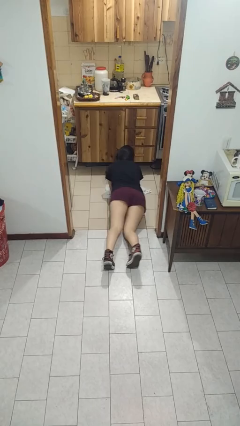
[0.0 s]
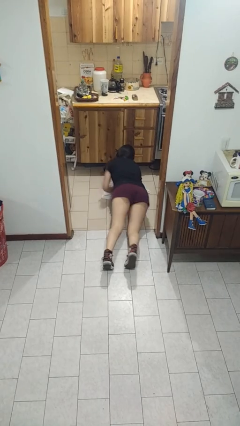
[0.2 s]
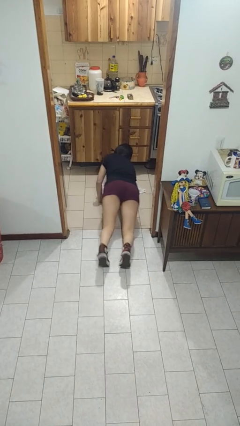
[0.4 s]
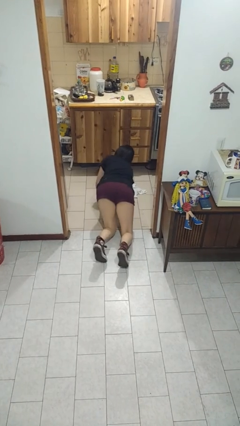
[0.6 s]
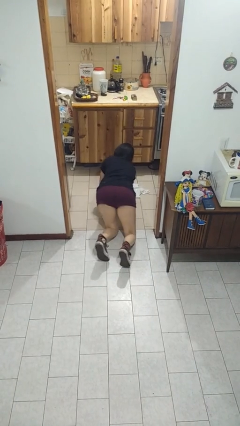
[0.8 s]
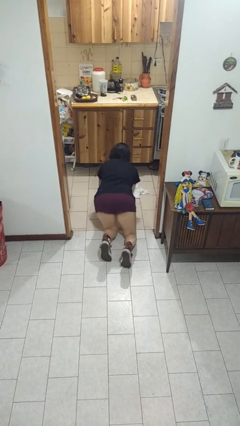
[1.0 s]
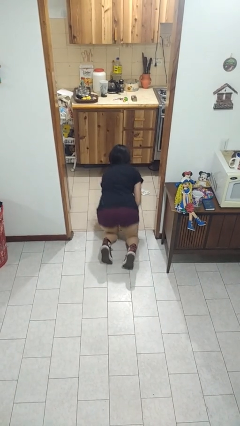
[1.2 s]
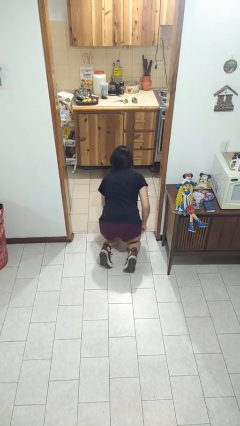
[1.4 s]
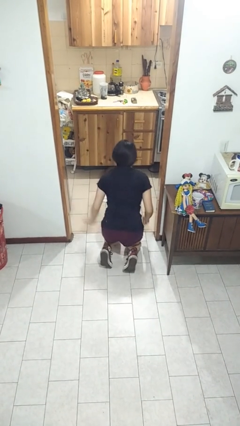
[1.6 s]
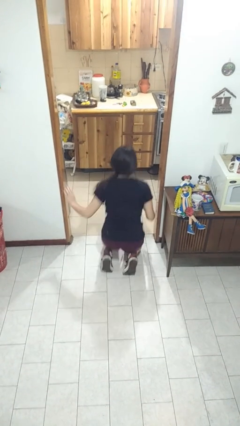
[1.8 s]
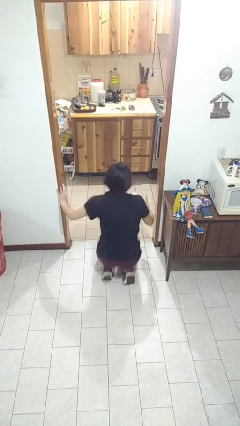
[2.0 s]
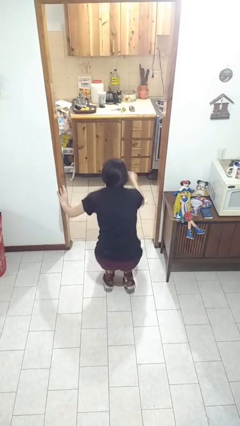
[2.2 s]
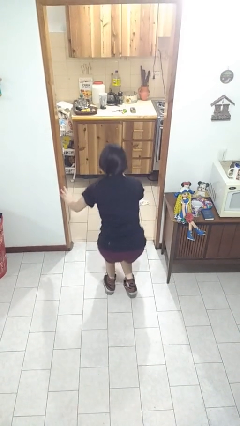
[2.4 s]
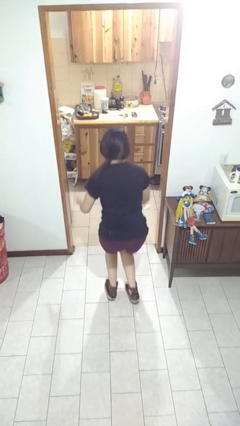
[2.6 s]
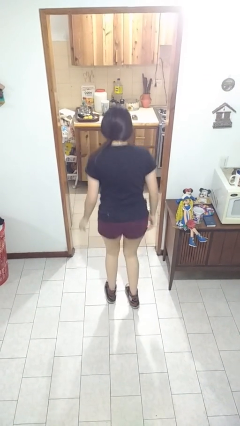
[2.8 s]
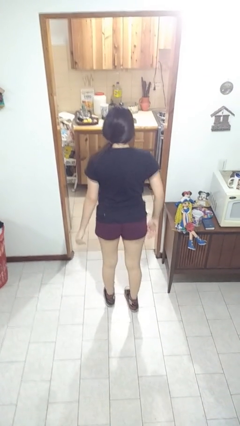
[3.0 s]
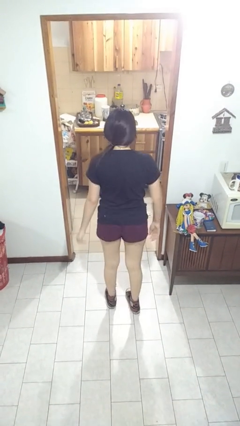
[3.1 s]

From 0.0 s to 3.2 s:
person stands up from floor

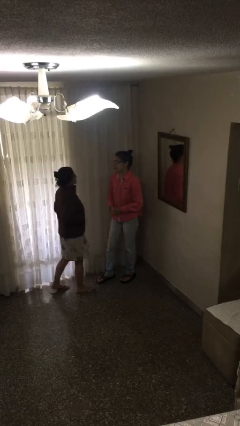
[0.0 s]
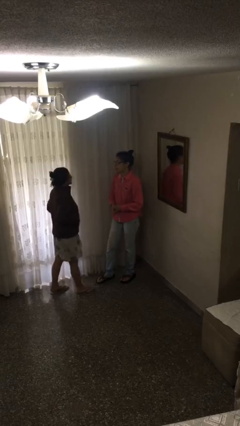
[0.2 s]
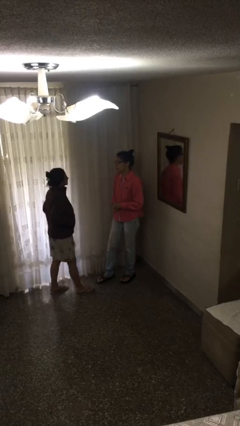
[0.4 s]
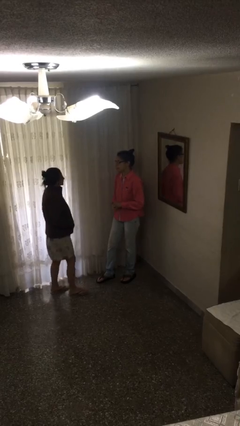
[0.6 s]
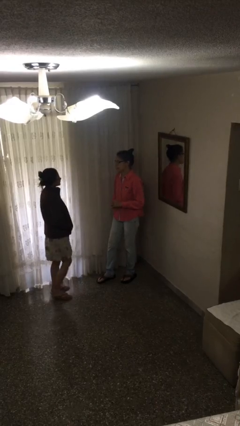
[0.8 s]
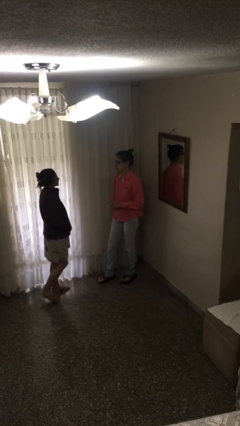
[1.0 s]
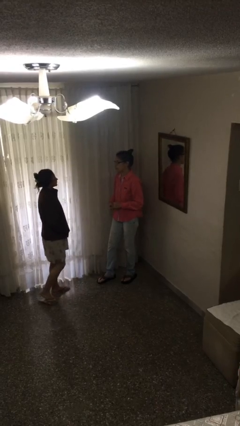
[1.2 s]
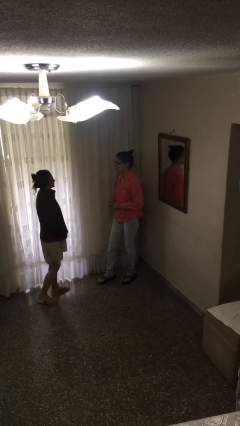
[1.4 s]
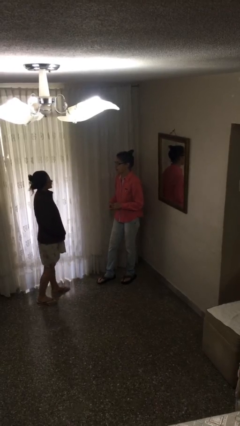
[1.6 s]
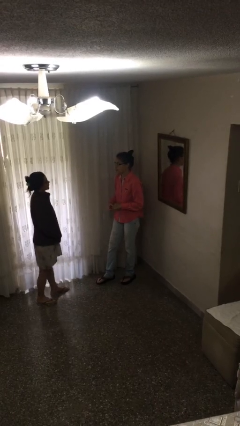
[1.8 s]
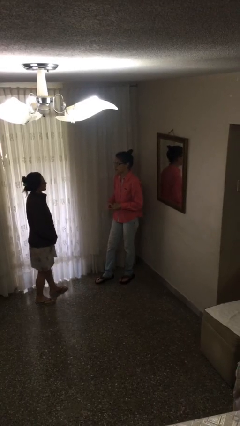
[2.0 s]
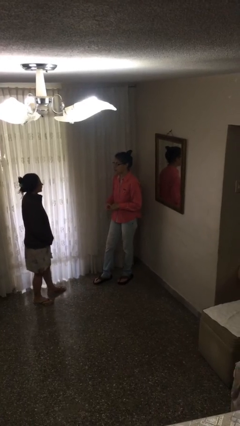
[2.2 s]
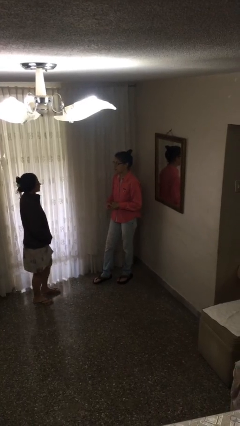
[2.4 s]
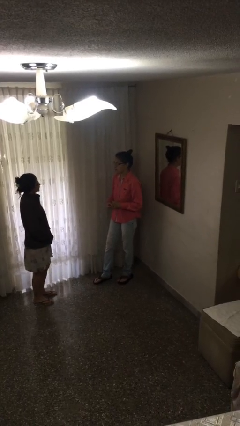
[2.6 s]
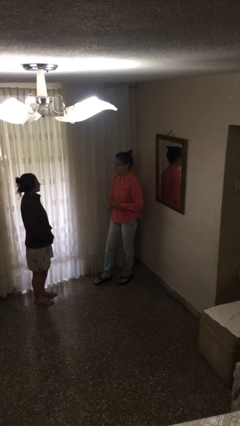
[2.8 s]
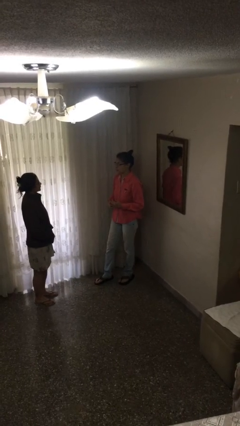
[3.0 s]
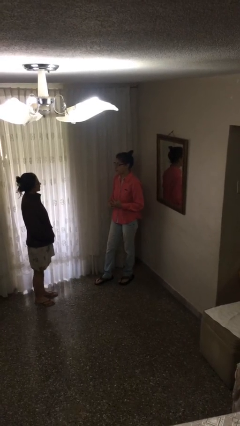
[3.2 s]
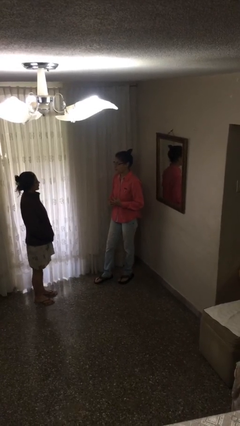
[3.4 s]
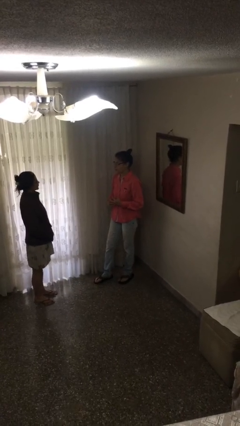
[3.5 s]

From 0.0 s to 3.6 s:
person talks to person

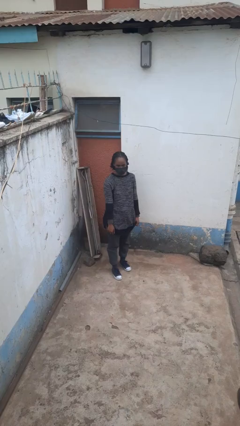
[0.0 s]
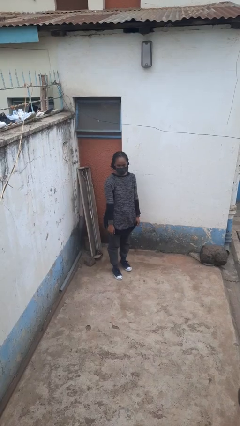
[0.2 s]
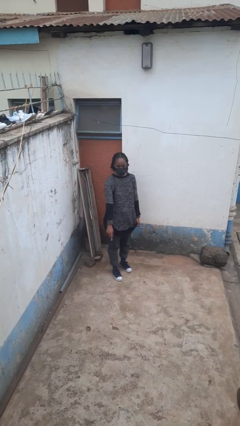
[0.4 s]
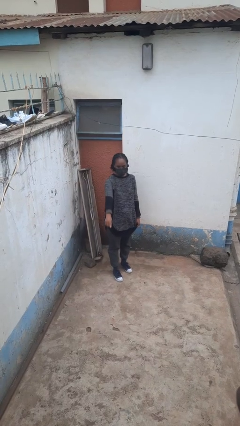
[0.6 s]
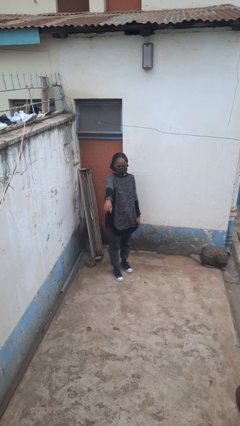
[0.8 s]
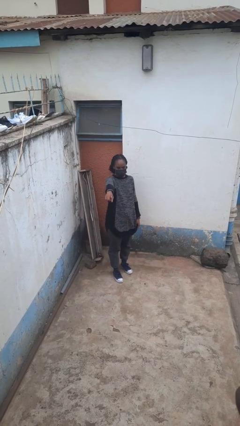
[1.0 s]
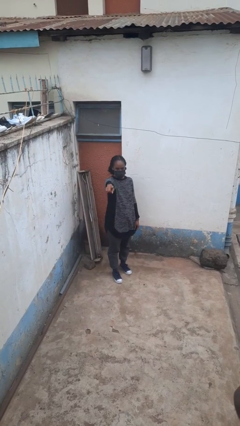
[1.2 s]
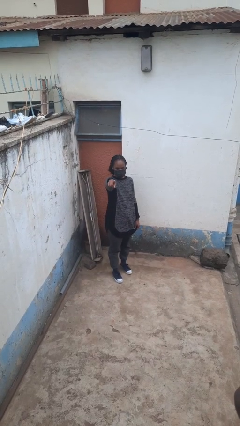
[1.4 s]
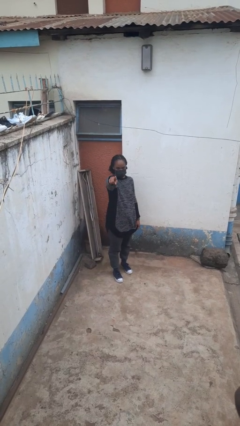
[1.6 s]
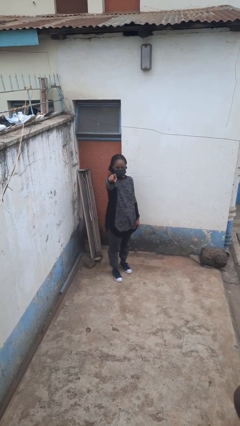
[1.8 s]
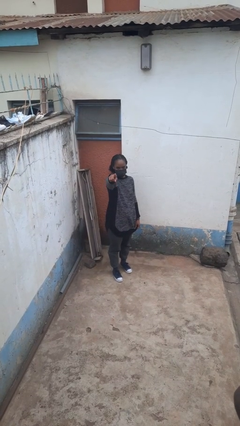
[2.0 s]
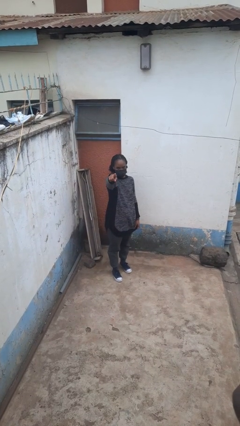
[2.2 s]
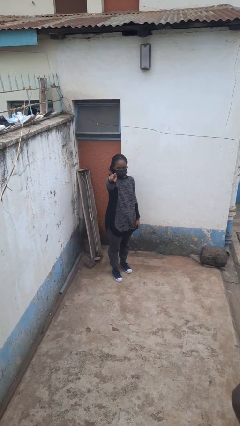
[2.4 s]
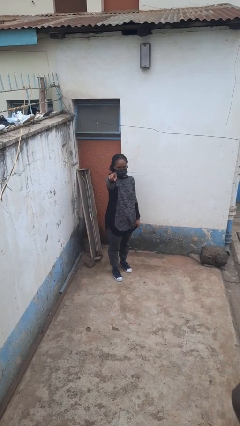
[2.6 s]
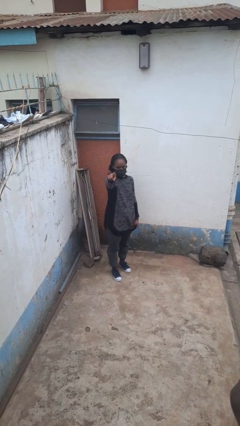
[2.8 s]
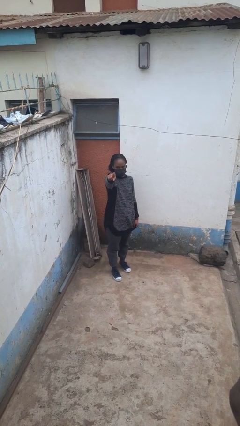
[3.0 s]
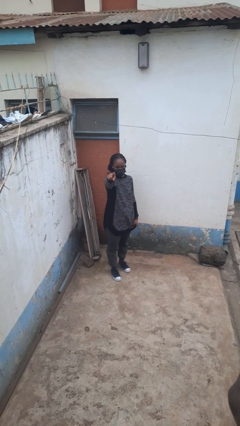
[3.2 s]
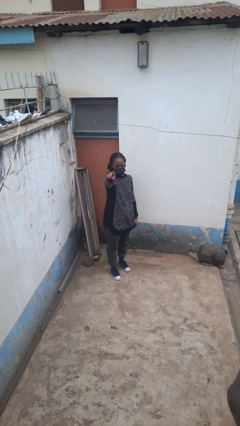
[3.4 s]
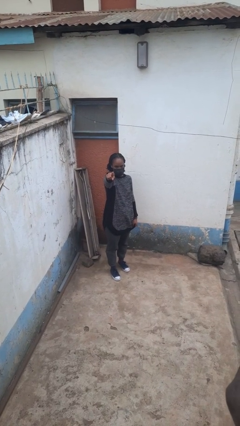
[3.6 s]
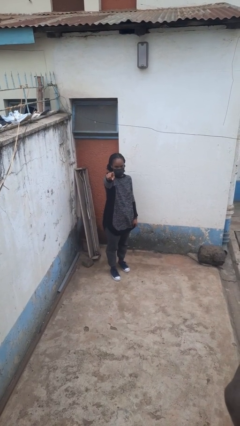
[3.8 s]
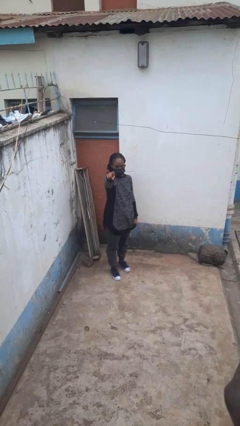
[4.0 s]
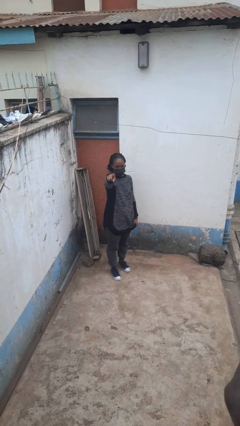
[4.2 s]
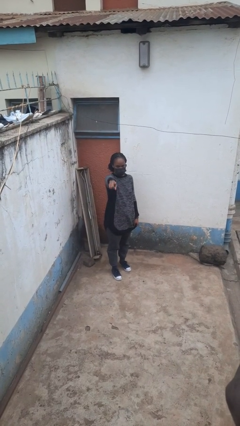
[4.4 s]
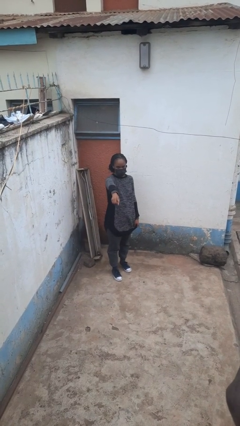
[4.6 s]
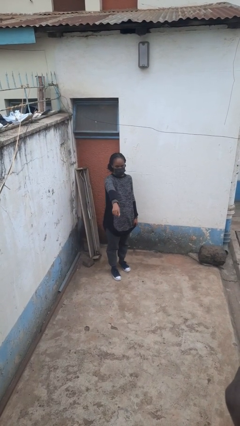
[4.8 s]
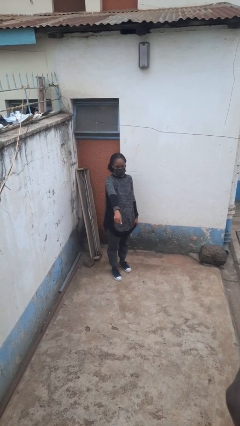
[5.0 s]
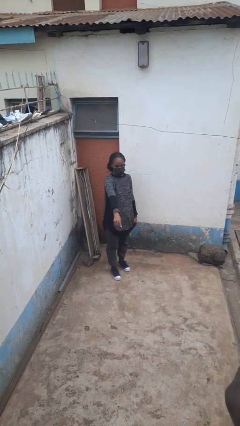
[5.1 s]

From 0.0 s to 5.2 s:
person points at person

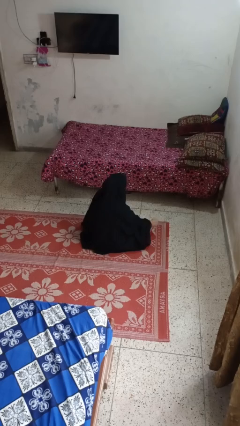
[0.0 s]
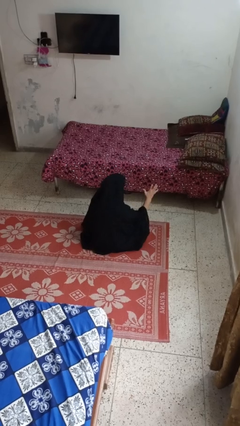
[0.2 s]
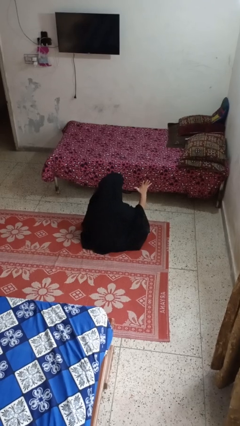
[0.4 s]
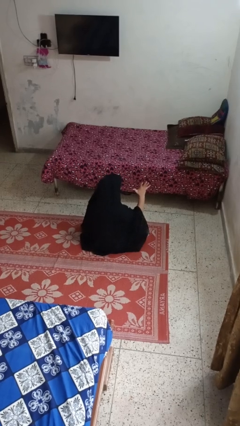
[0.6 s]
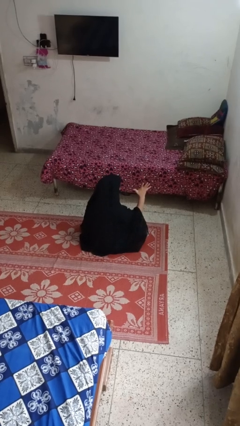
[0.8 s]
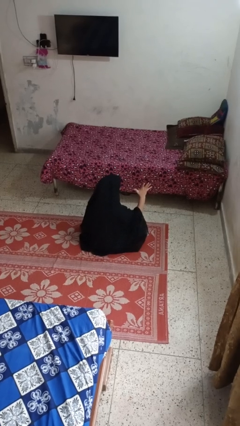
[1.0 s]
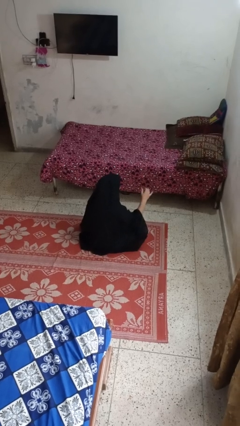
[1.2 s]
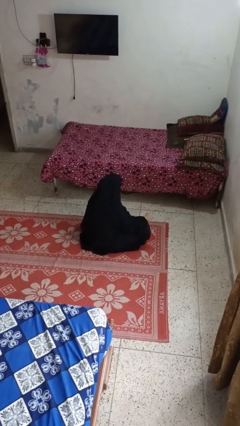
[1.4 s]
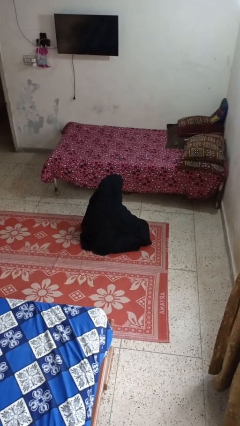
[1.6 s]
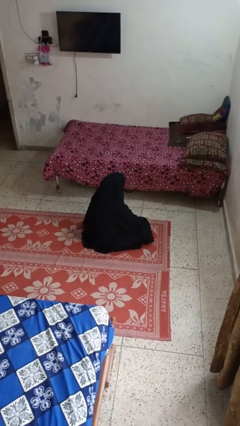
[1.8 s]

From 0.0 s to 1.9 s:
person gestures number five

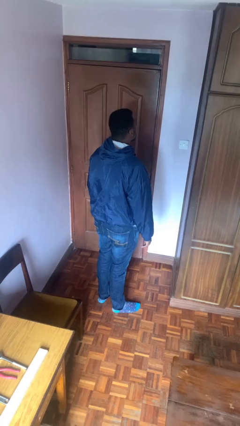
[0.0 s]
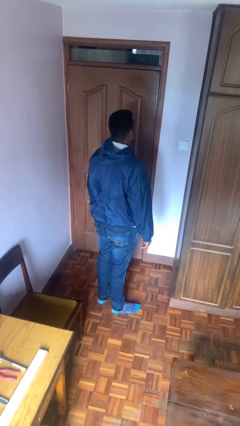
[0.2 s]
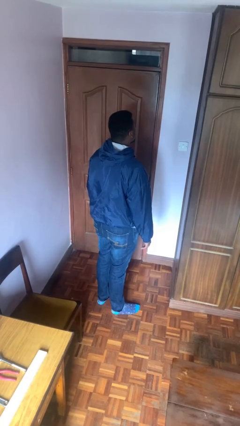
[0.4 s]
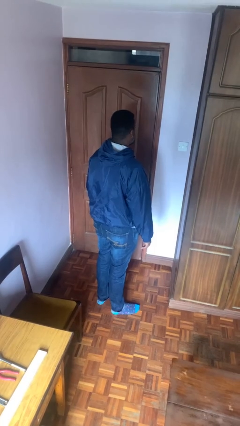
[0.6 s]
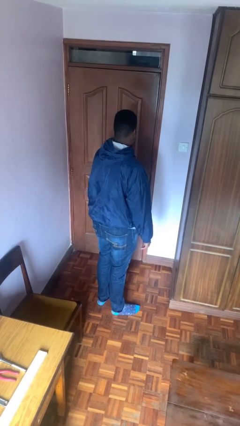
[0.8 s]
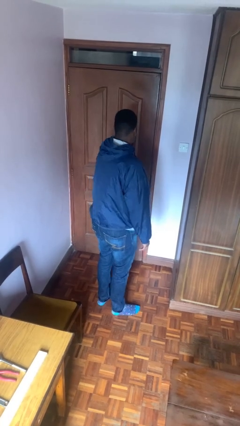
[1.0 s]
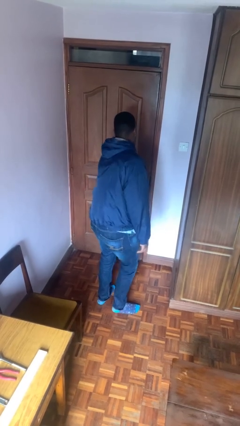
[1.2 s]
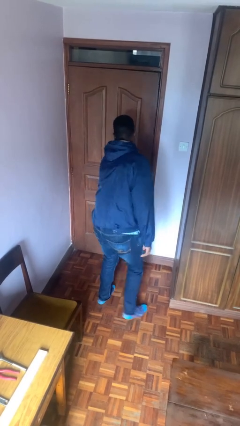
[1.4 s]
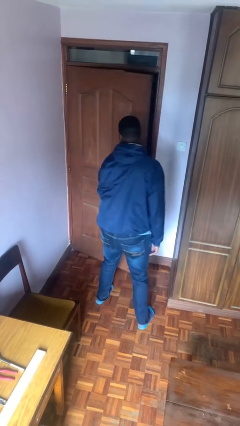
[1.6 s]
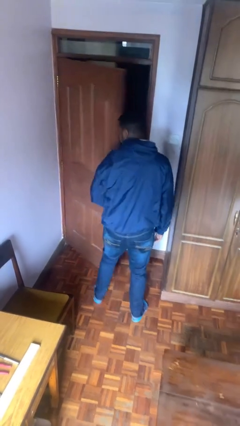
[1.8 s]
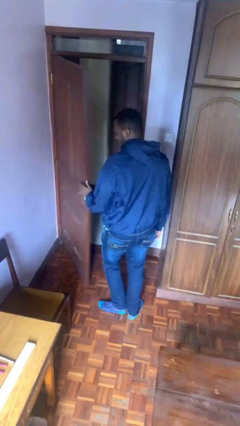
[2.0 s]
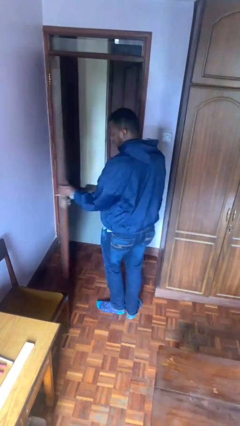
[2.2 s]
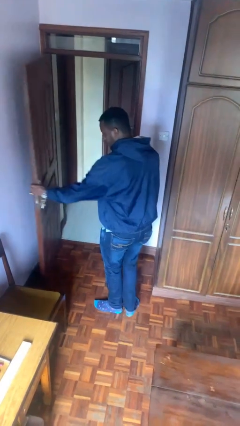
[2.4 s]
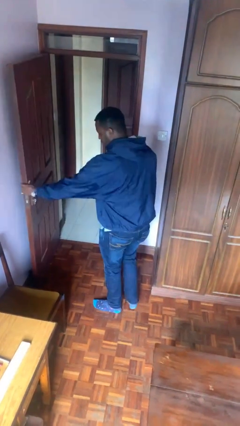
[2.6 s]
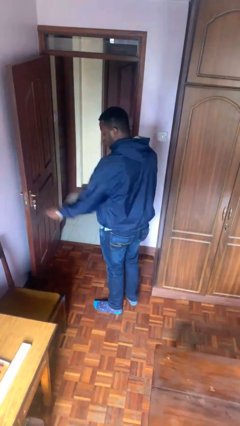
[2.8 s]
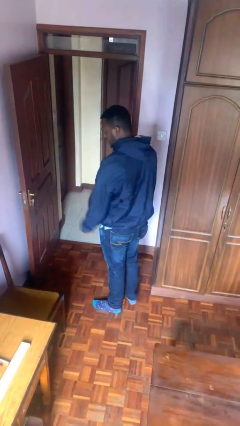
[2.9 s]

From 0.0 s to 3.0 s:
person opens facility door

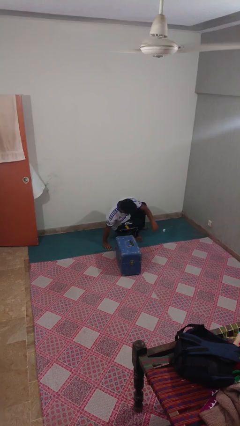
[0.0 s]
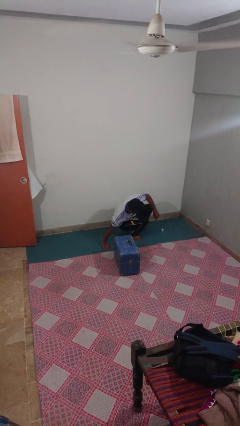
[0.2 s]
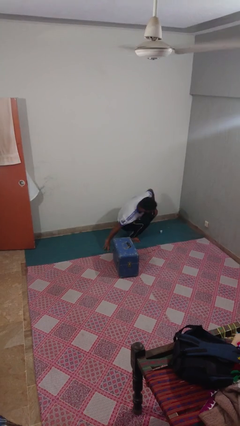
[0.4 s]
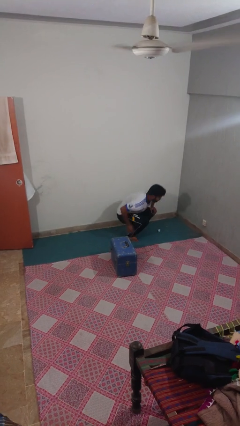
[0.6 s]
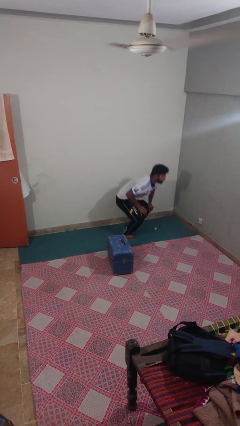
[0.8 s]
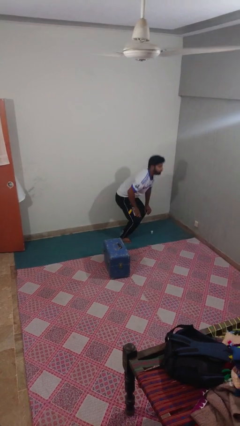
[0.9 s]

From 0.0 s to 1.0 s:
person trips on object on floor
